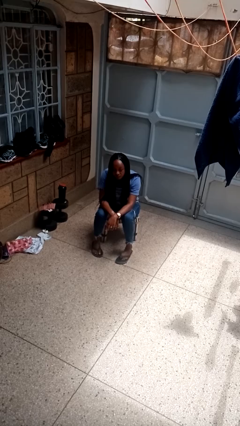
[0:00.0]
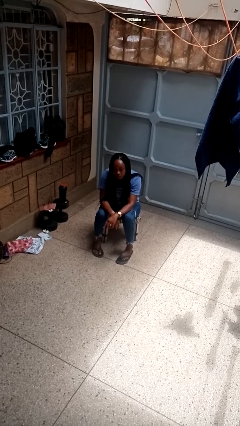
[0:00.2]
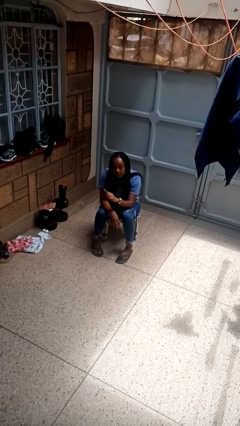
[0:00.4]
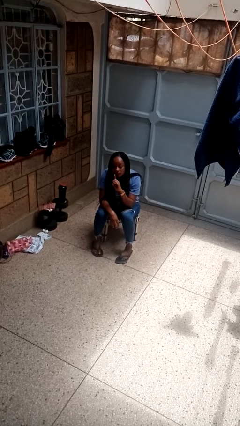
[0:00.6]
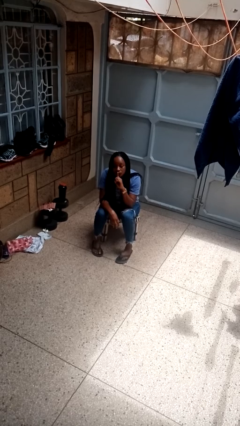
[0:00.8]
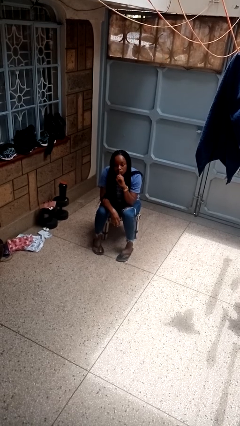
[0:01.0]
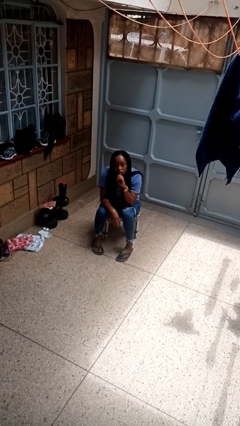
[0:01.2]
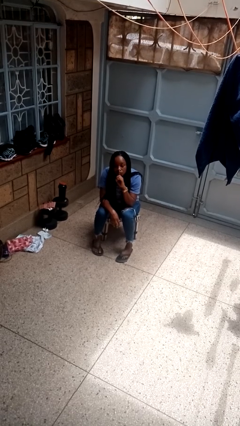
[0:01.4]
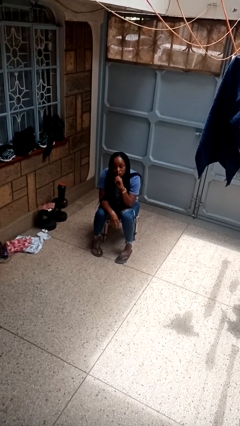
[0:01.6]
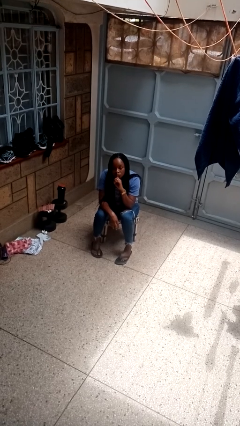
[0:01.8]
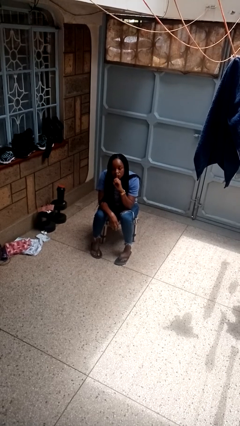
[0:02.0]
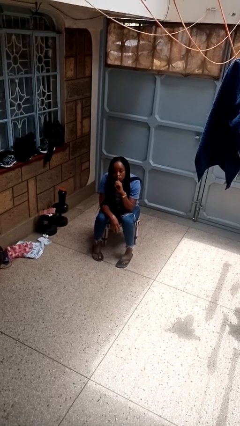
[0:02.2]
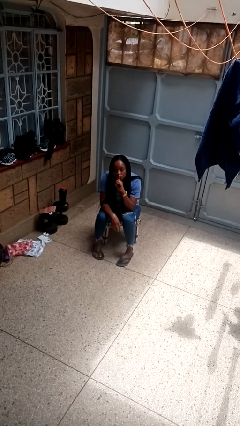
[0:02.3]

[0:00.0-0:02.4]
person gestures be quiet

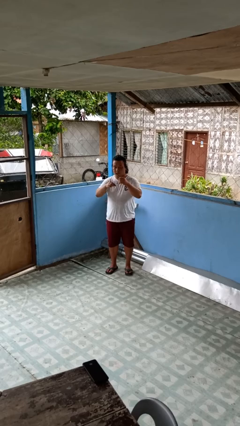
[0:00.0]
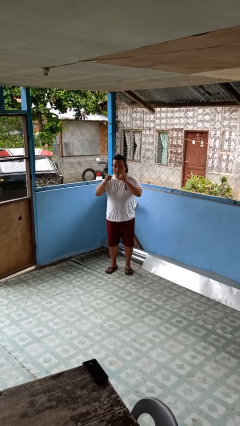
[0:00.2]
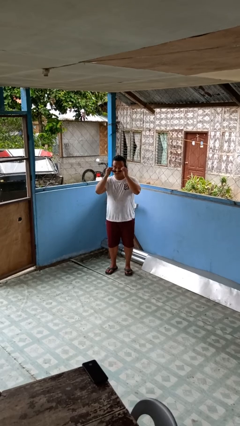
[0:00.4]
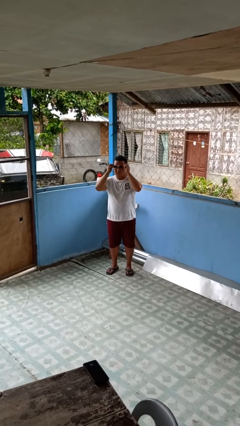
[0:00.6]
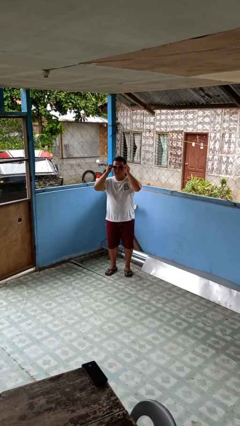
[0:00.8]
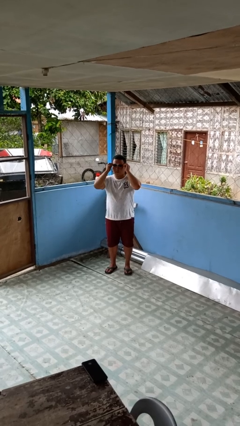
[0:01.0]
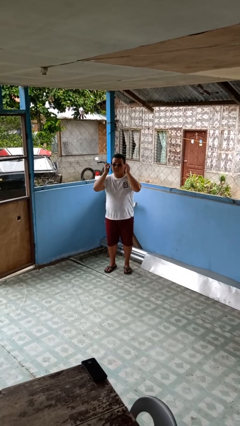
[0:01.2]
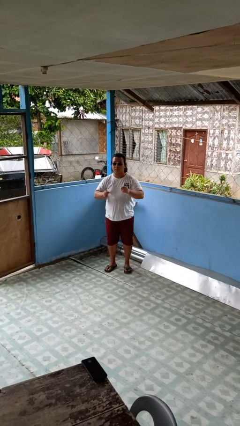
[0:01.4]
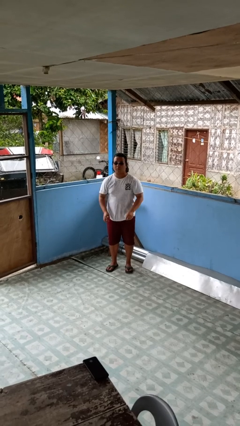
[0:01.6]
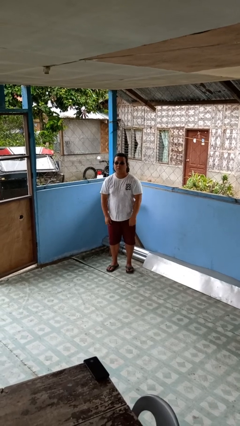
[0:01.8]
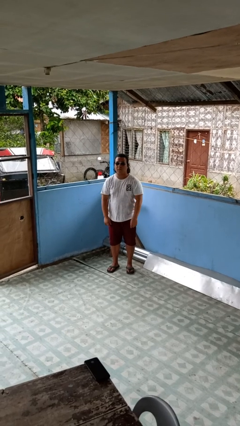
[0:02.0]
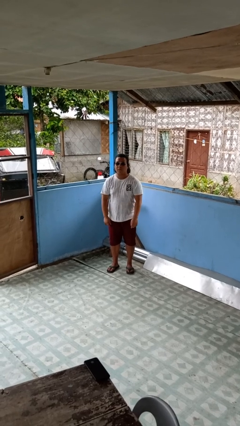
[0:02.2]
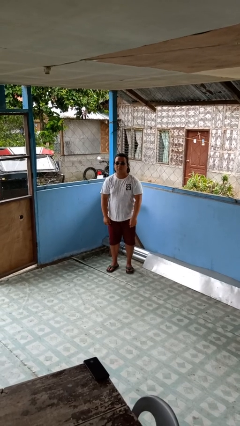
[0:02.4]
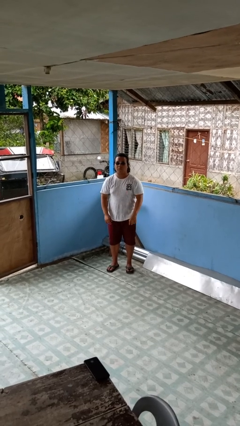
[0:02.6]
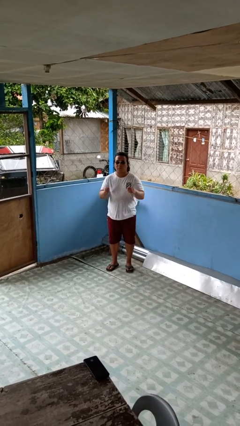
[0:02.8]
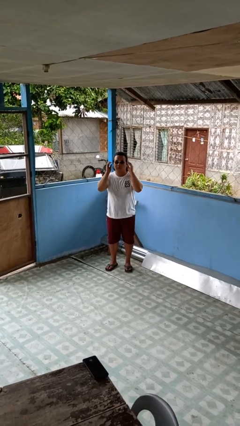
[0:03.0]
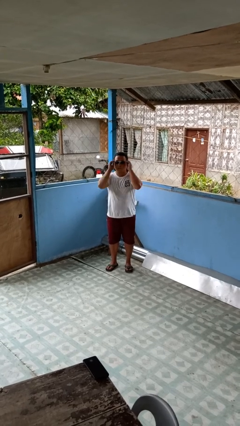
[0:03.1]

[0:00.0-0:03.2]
person puts on sunglasses

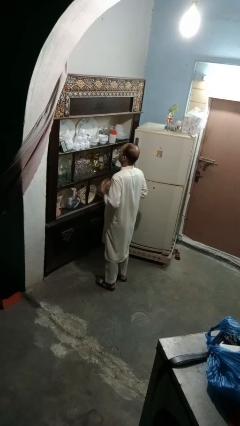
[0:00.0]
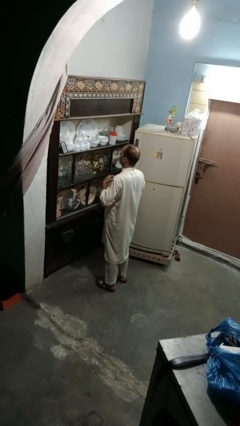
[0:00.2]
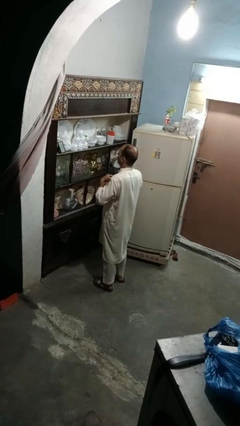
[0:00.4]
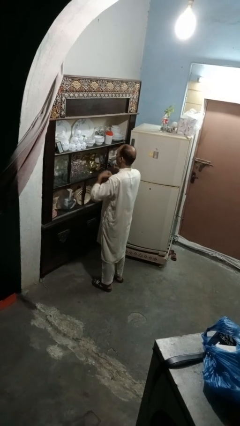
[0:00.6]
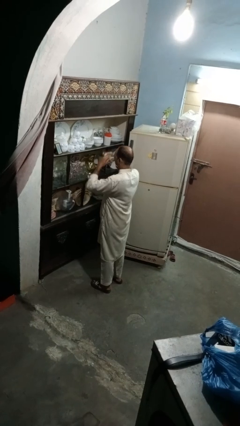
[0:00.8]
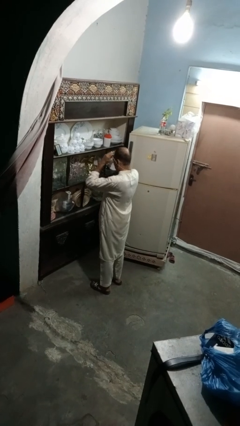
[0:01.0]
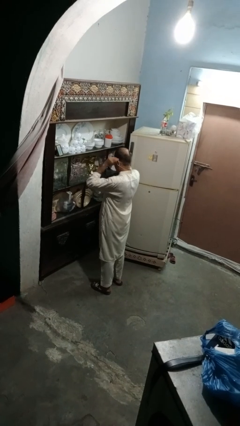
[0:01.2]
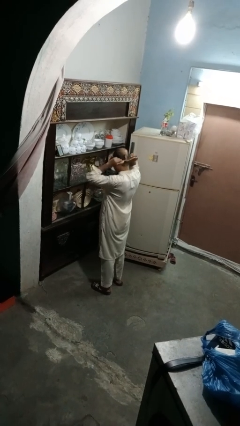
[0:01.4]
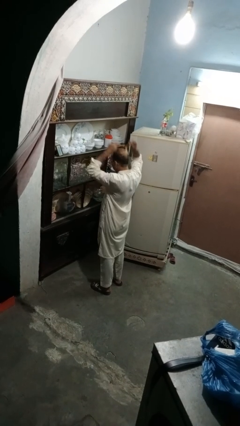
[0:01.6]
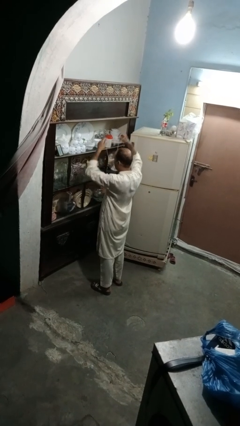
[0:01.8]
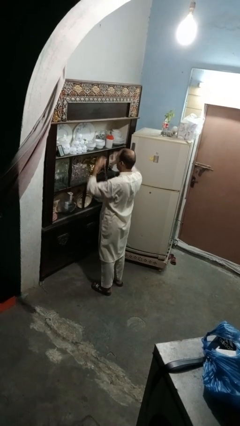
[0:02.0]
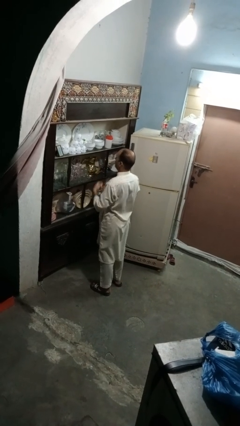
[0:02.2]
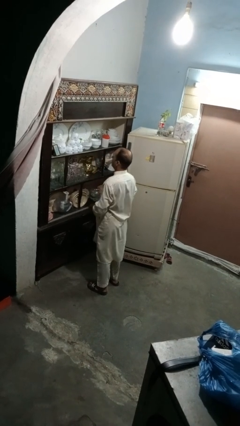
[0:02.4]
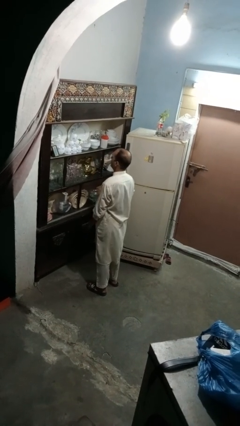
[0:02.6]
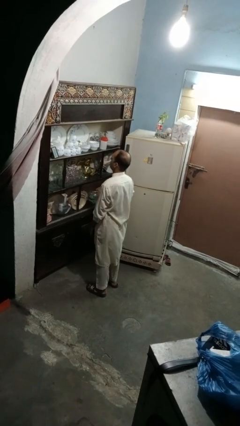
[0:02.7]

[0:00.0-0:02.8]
person takes off necklace

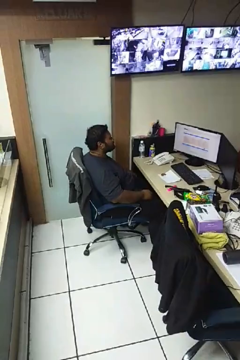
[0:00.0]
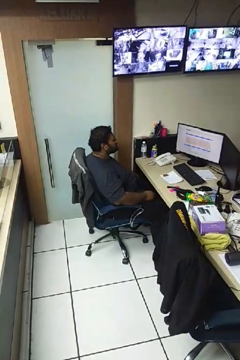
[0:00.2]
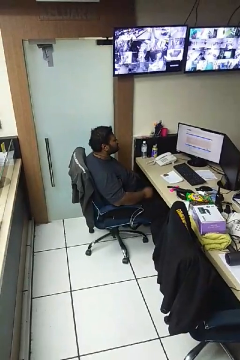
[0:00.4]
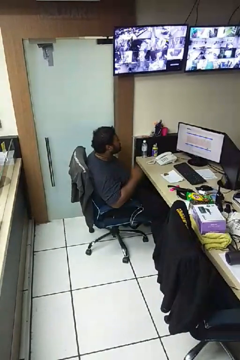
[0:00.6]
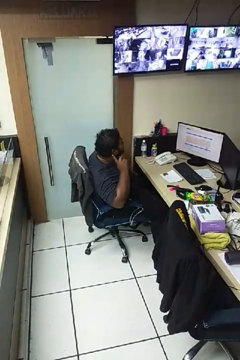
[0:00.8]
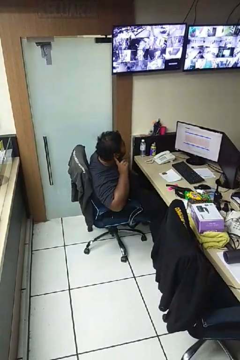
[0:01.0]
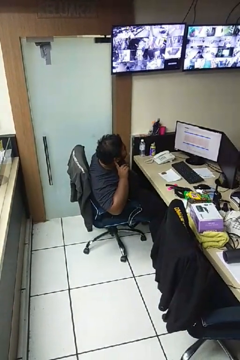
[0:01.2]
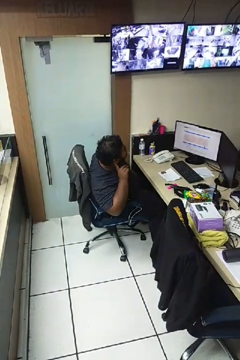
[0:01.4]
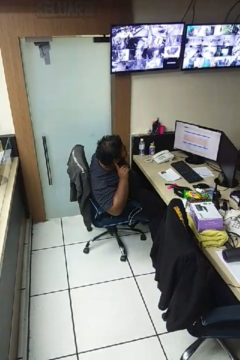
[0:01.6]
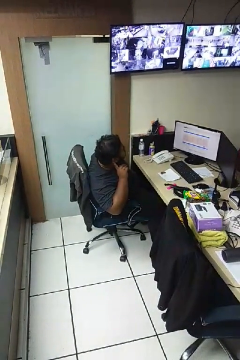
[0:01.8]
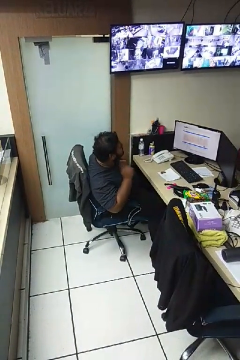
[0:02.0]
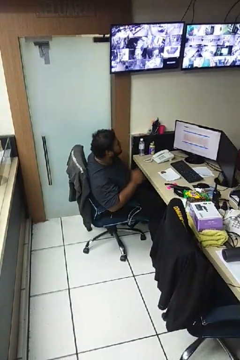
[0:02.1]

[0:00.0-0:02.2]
person gestures listen closely

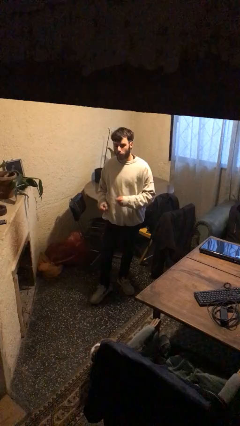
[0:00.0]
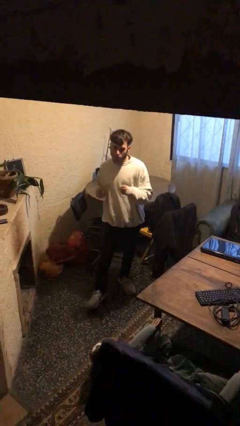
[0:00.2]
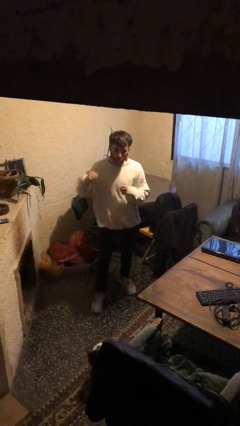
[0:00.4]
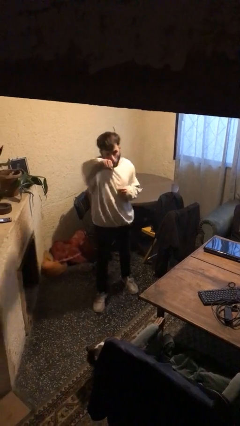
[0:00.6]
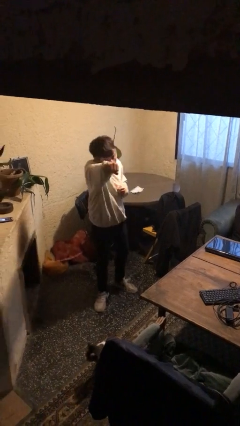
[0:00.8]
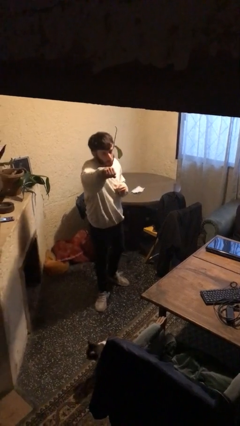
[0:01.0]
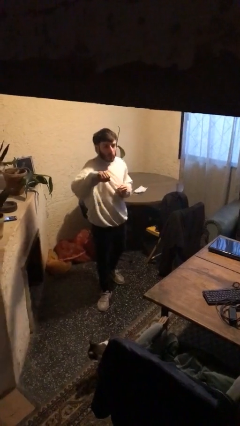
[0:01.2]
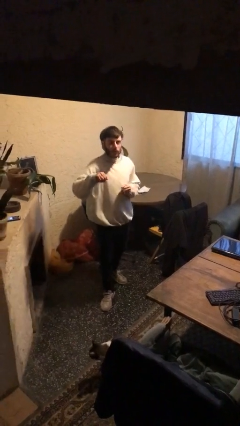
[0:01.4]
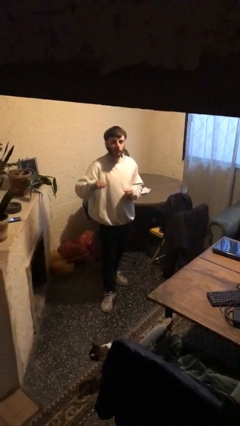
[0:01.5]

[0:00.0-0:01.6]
person punches

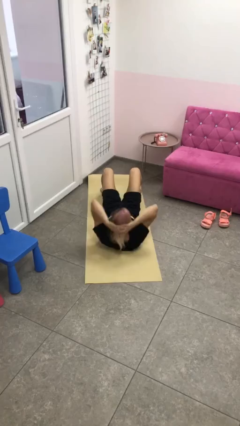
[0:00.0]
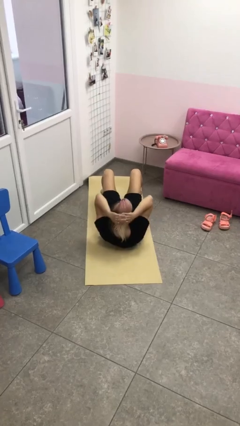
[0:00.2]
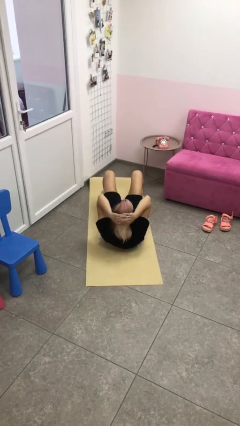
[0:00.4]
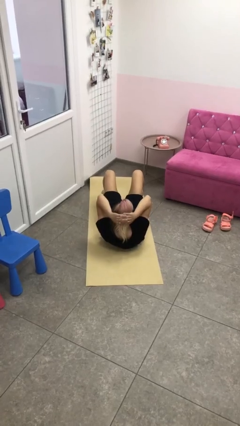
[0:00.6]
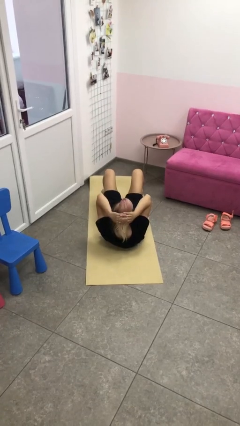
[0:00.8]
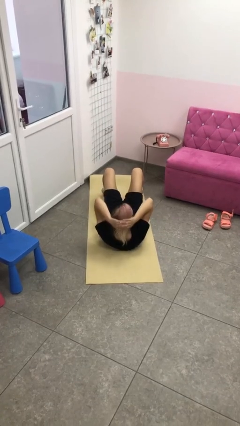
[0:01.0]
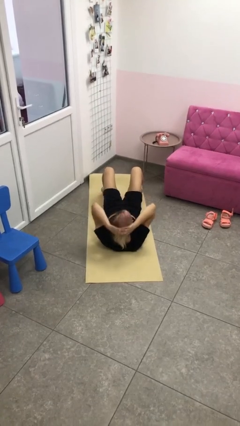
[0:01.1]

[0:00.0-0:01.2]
person exercises with situp

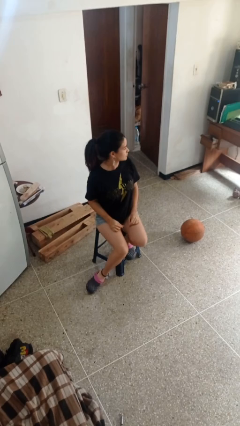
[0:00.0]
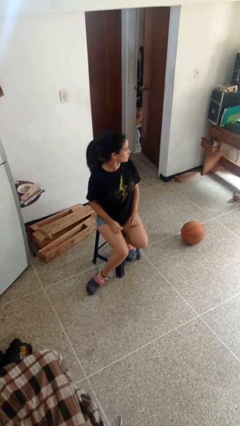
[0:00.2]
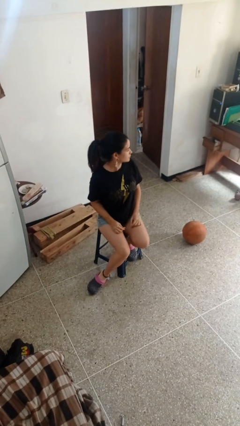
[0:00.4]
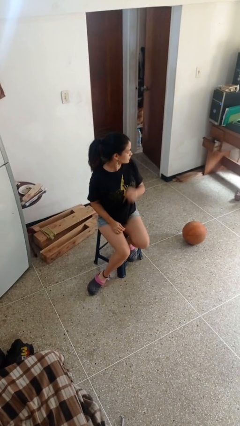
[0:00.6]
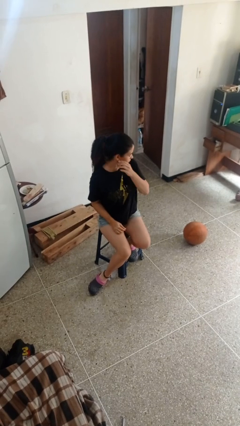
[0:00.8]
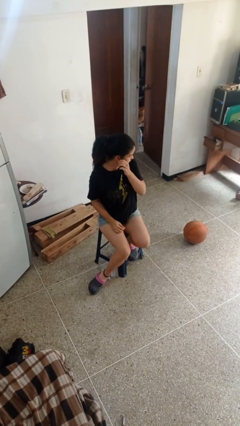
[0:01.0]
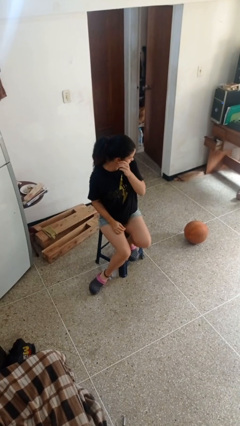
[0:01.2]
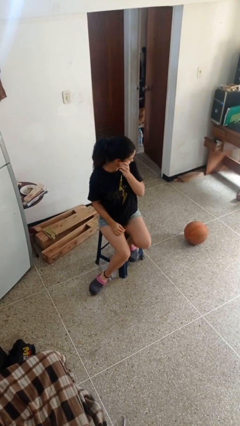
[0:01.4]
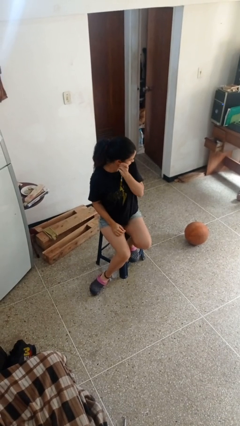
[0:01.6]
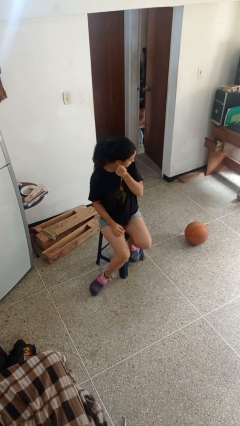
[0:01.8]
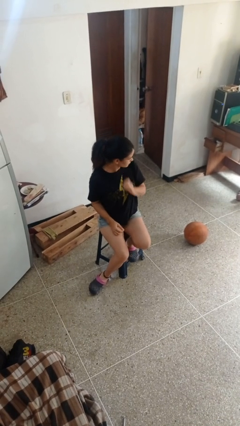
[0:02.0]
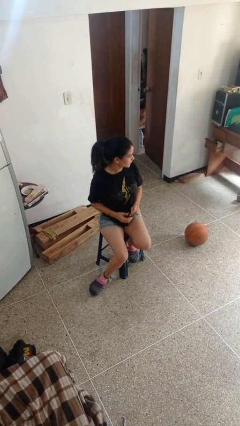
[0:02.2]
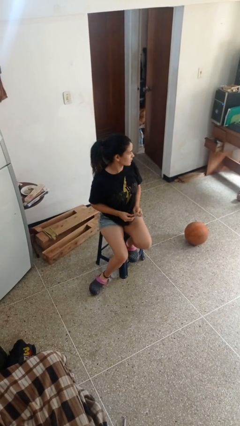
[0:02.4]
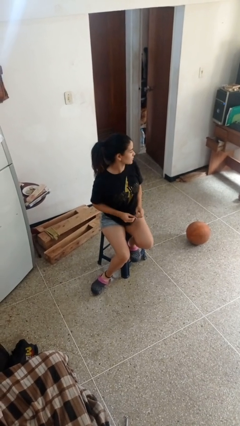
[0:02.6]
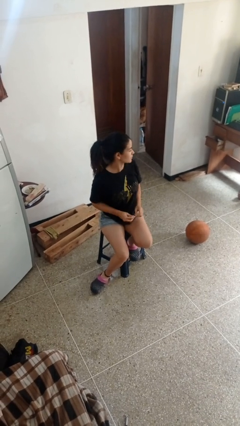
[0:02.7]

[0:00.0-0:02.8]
person takes off earrings

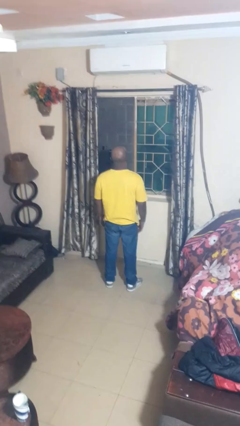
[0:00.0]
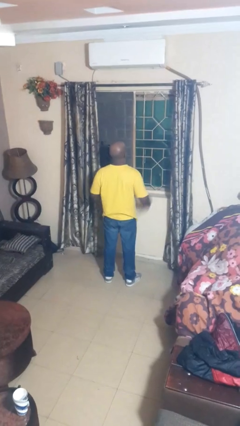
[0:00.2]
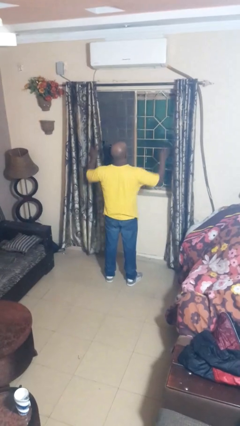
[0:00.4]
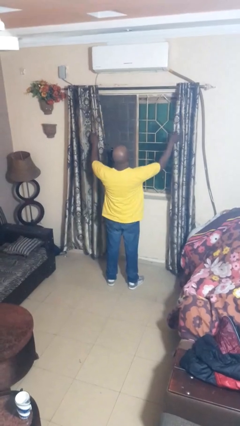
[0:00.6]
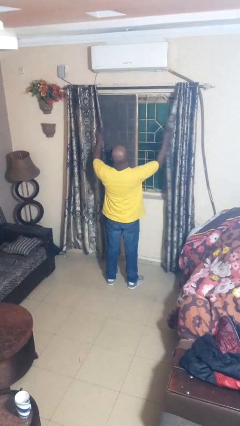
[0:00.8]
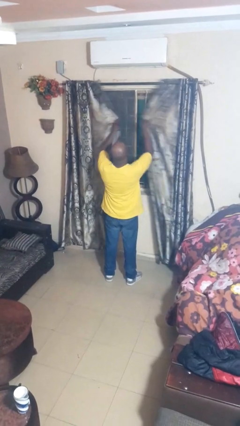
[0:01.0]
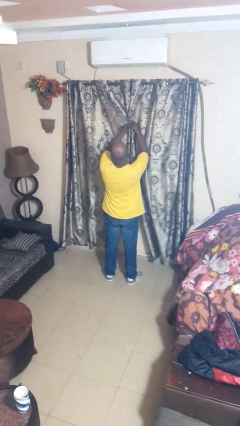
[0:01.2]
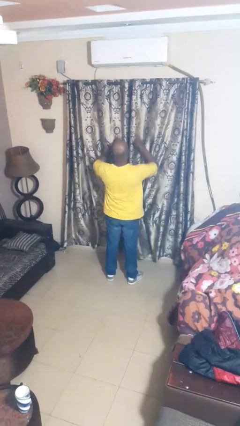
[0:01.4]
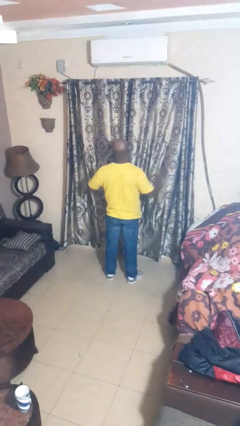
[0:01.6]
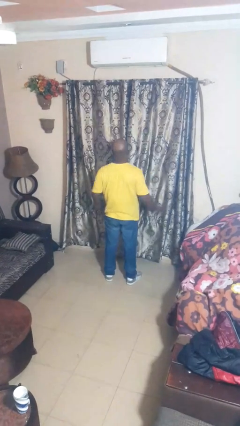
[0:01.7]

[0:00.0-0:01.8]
person closes curtains
